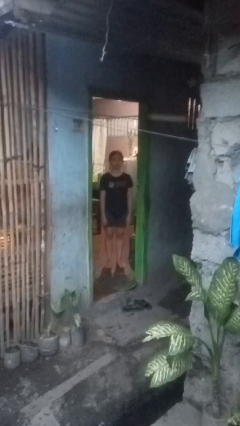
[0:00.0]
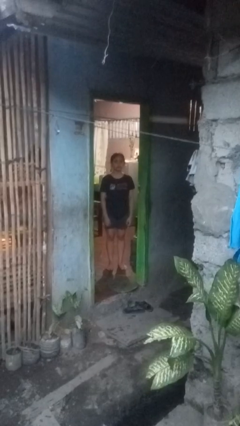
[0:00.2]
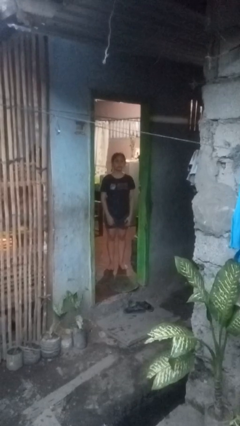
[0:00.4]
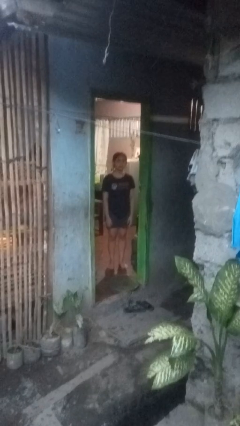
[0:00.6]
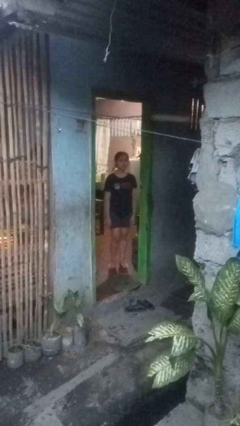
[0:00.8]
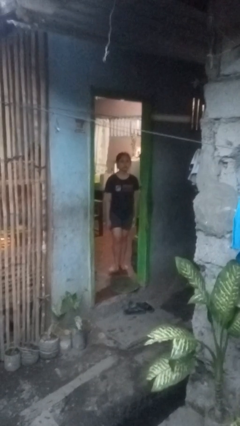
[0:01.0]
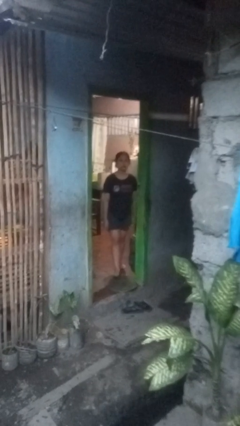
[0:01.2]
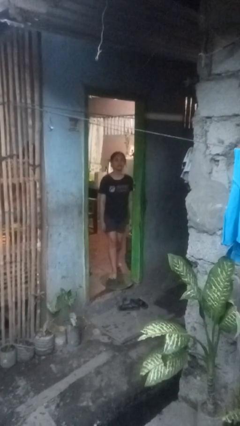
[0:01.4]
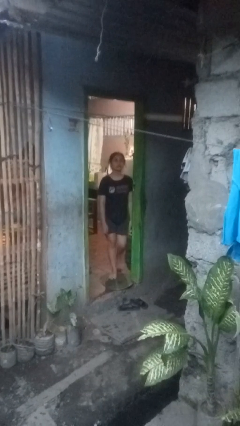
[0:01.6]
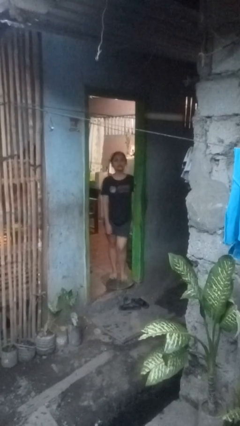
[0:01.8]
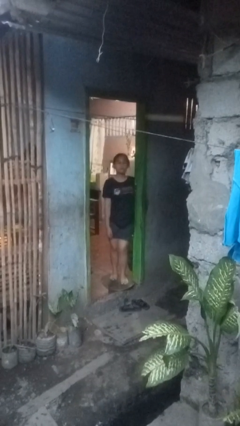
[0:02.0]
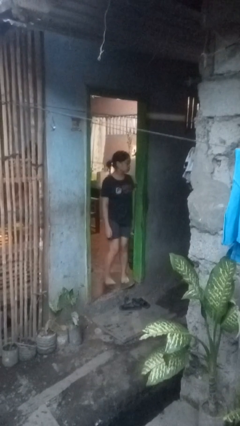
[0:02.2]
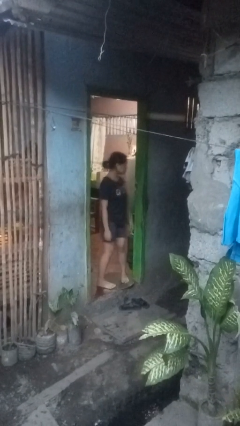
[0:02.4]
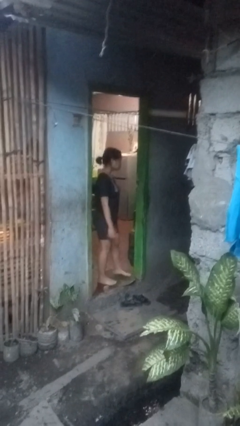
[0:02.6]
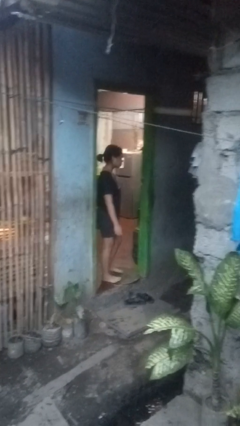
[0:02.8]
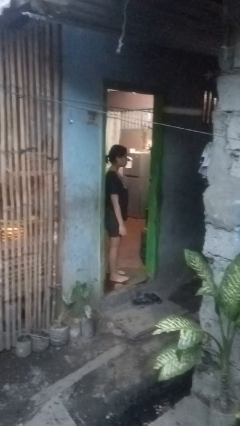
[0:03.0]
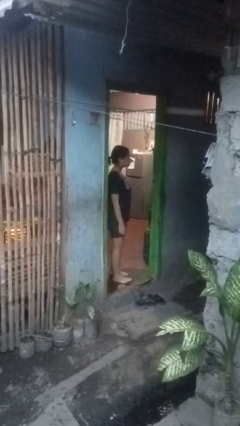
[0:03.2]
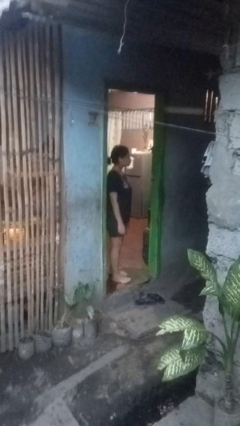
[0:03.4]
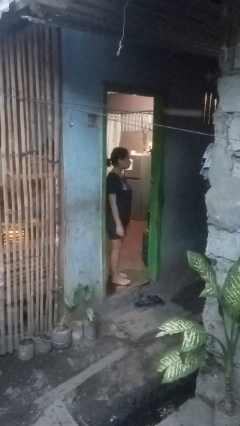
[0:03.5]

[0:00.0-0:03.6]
person bumps into wall

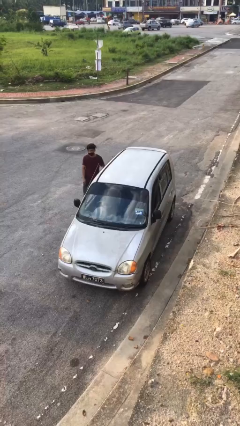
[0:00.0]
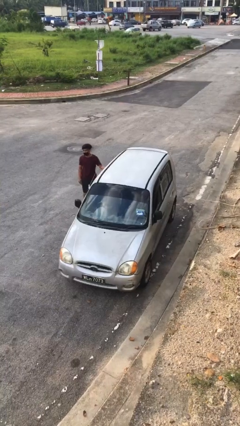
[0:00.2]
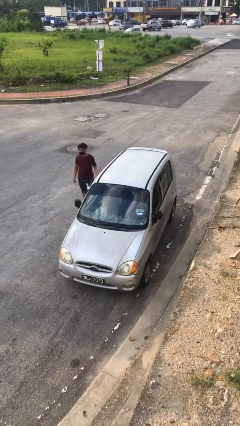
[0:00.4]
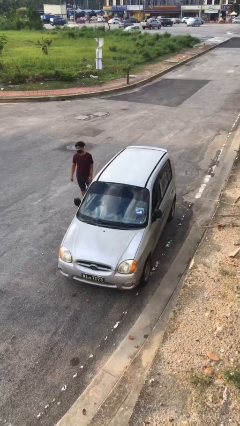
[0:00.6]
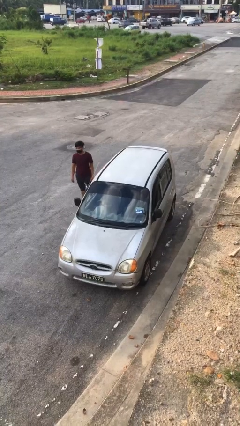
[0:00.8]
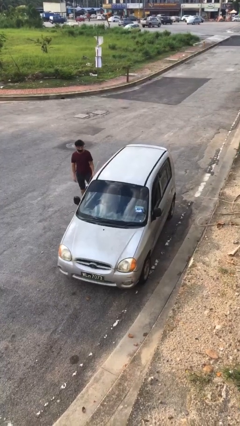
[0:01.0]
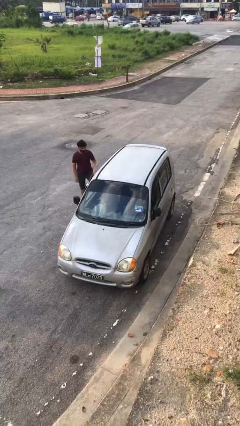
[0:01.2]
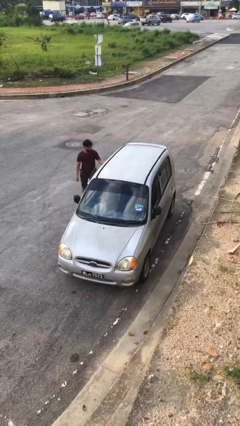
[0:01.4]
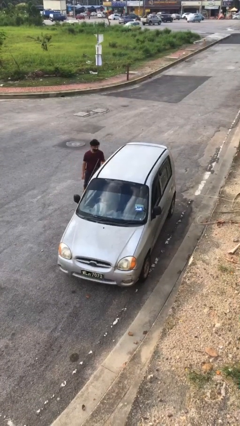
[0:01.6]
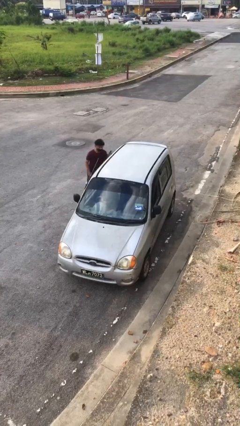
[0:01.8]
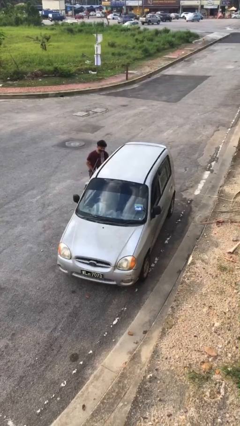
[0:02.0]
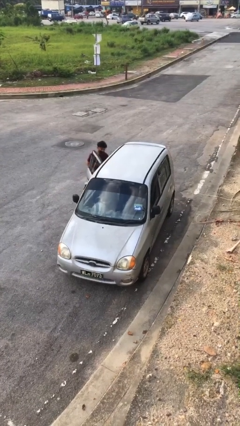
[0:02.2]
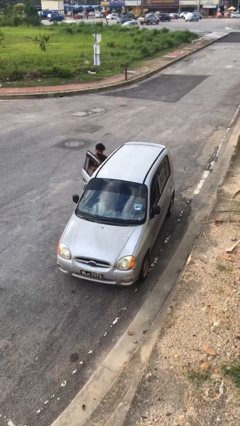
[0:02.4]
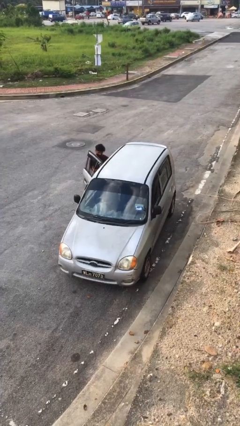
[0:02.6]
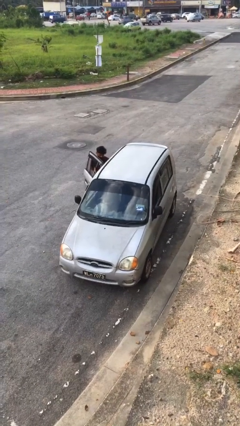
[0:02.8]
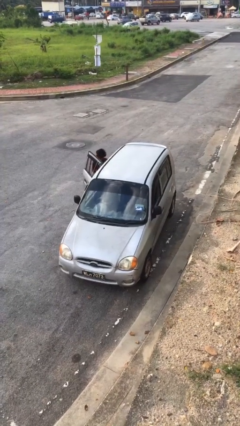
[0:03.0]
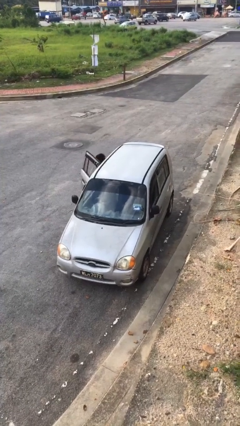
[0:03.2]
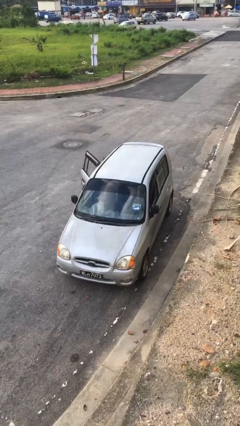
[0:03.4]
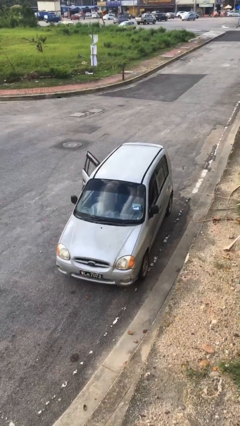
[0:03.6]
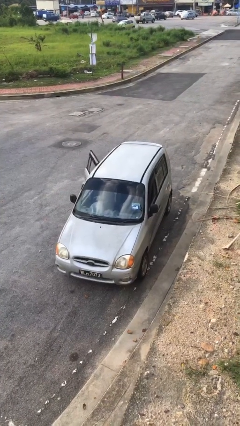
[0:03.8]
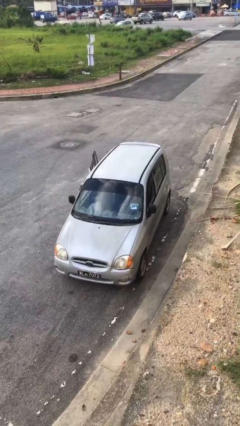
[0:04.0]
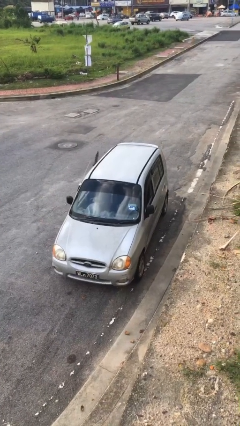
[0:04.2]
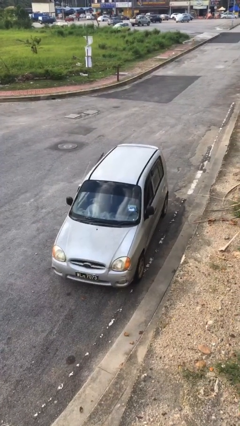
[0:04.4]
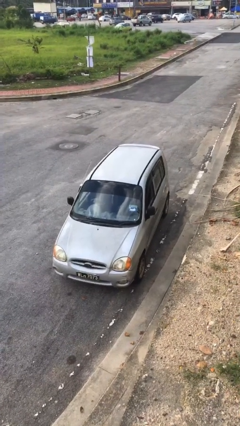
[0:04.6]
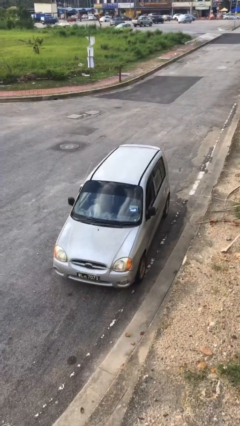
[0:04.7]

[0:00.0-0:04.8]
car picks up person

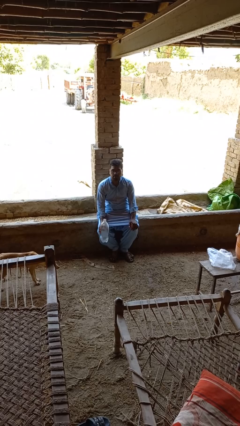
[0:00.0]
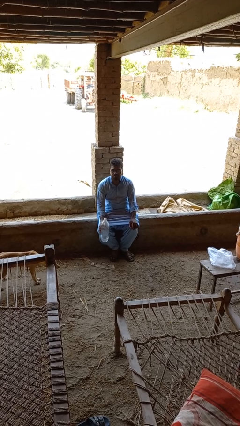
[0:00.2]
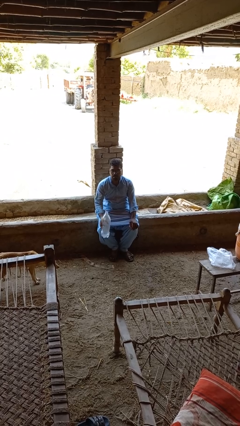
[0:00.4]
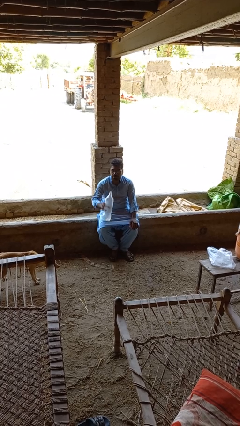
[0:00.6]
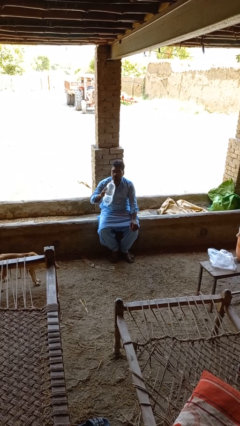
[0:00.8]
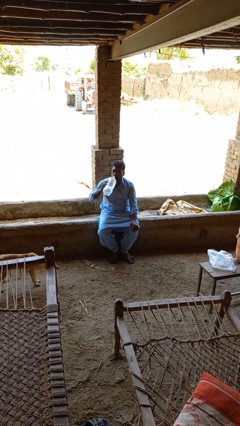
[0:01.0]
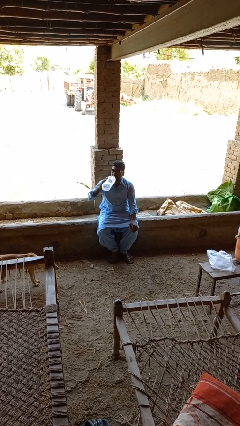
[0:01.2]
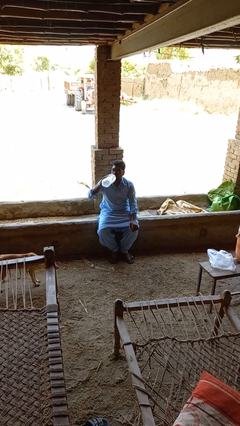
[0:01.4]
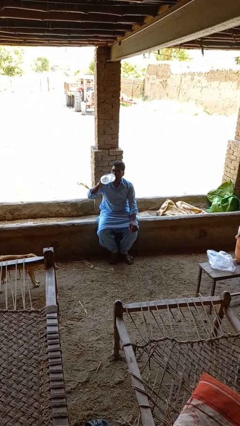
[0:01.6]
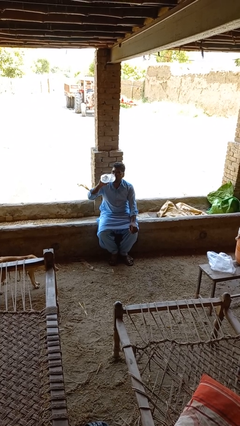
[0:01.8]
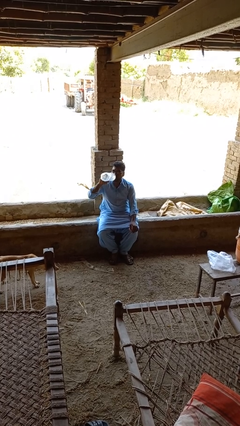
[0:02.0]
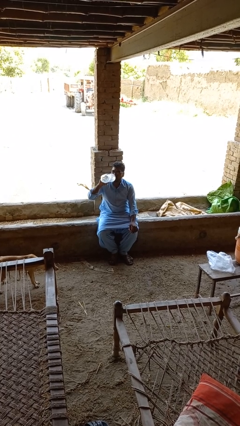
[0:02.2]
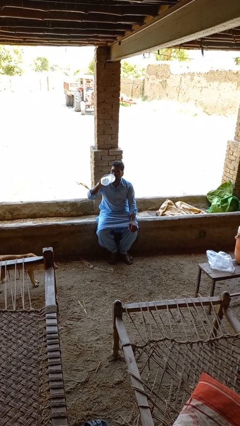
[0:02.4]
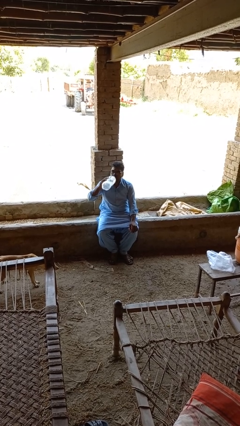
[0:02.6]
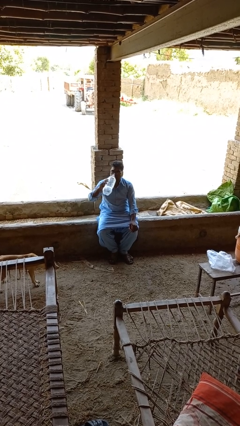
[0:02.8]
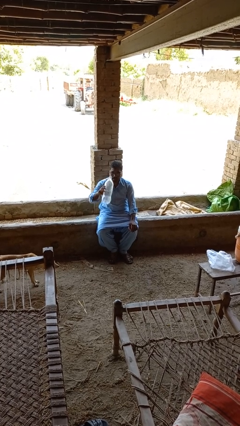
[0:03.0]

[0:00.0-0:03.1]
person drinks from bottle

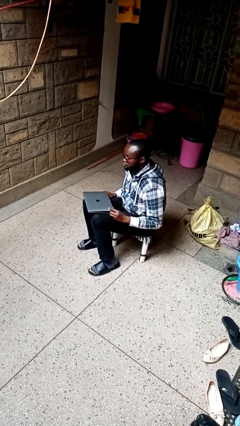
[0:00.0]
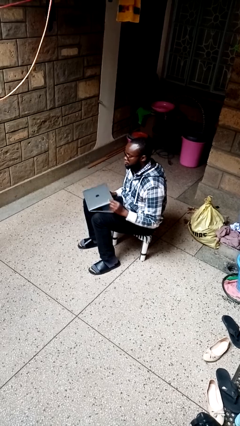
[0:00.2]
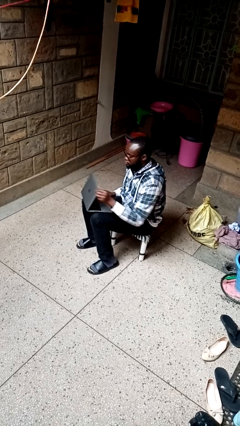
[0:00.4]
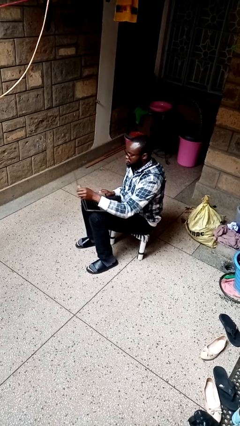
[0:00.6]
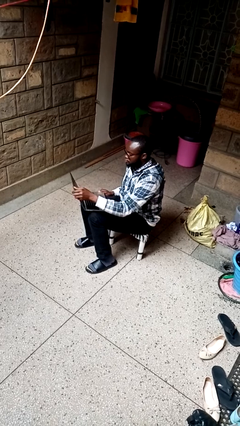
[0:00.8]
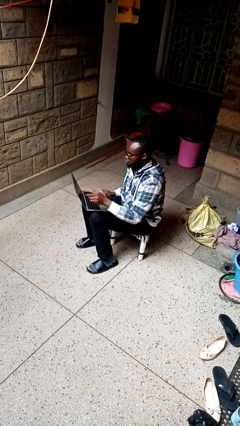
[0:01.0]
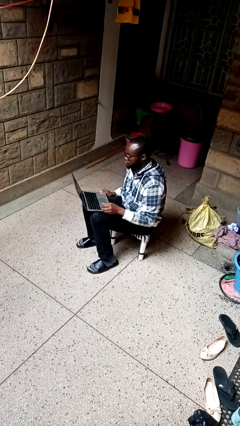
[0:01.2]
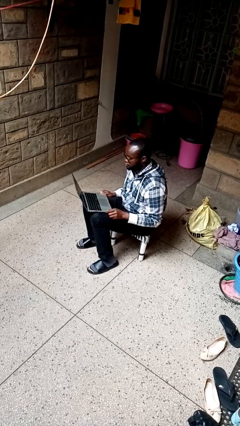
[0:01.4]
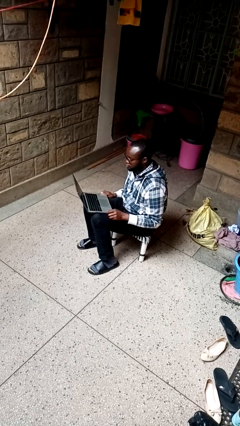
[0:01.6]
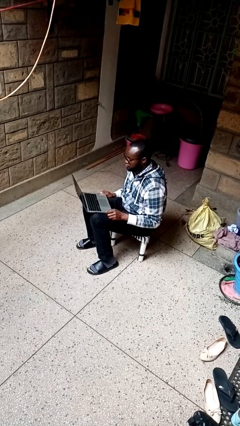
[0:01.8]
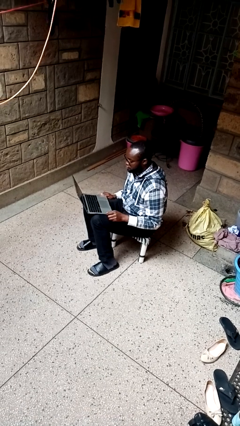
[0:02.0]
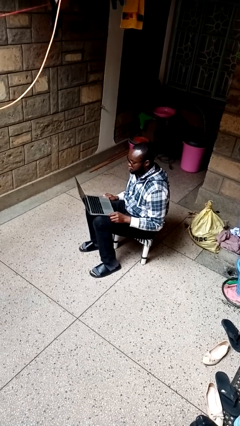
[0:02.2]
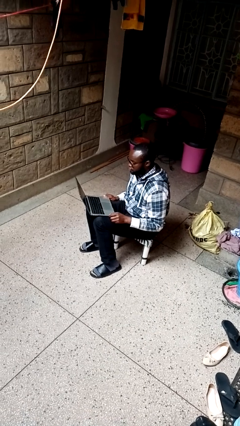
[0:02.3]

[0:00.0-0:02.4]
person opens laptop

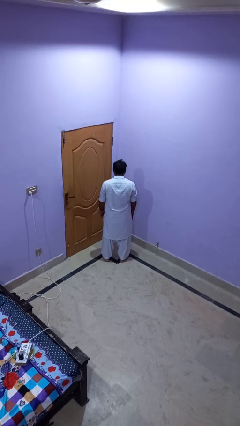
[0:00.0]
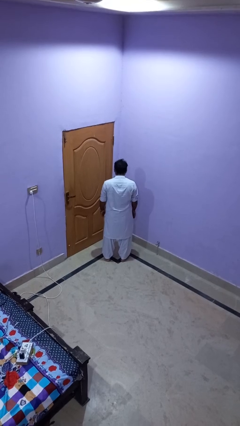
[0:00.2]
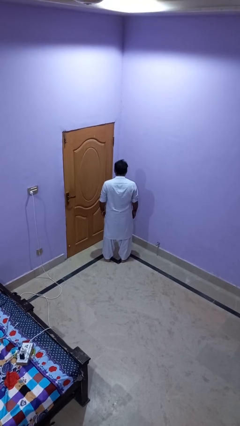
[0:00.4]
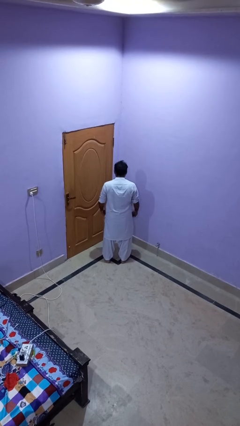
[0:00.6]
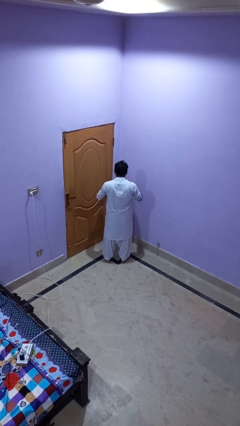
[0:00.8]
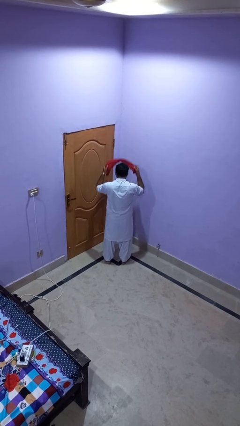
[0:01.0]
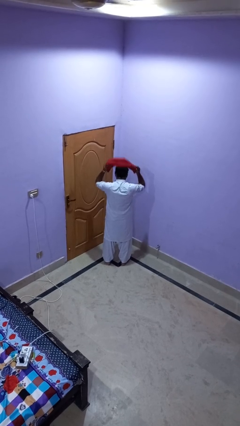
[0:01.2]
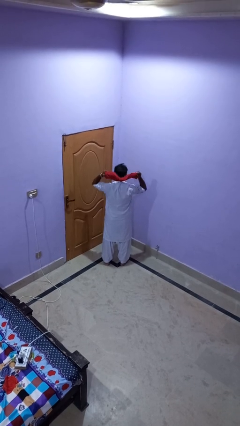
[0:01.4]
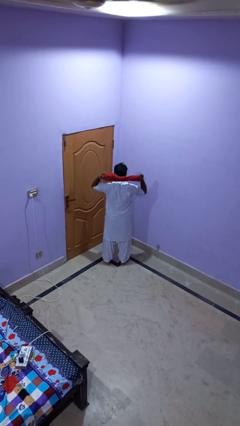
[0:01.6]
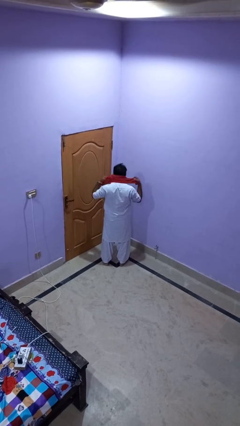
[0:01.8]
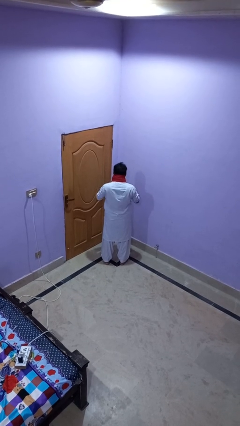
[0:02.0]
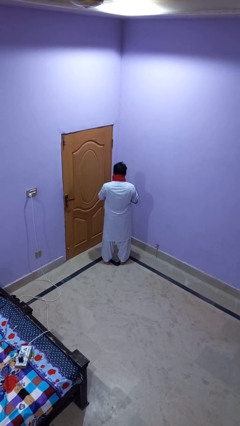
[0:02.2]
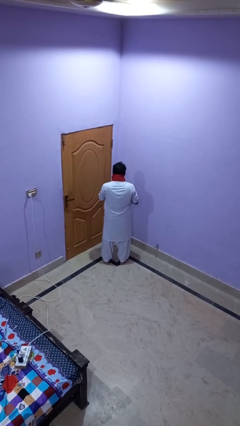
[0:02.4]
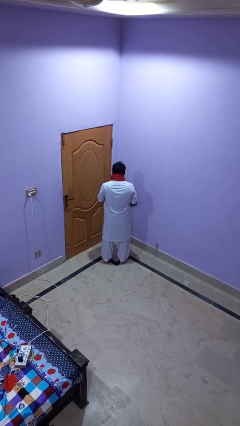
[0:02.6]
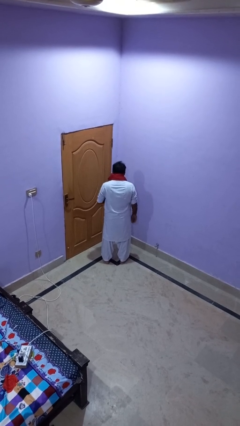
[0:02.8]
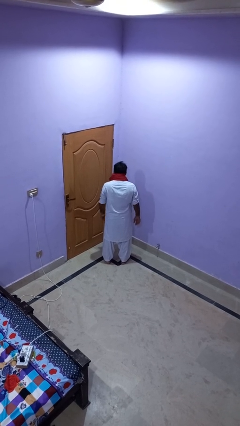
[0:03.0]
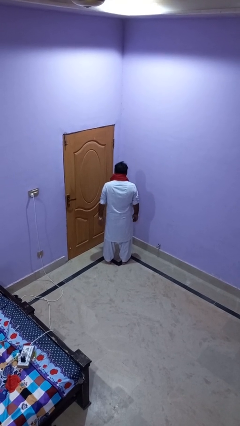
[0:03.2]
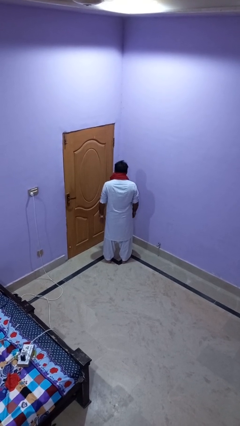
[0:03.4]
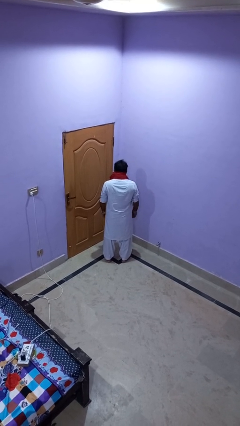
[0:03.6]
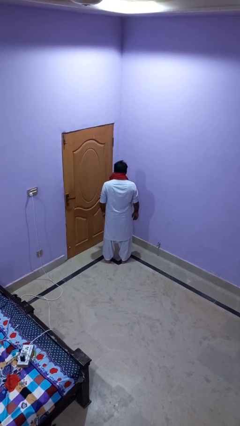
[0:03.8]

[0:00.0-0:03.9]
person puts on scarf
